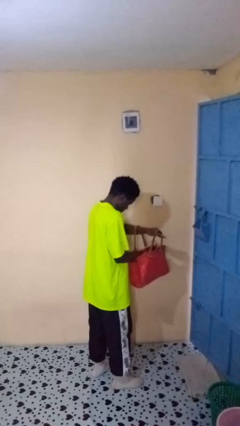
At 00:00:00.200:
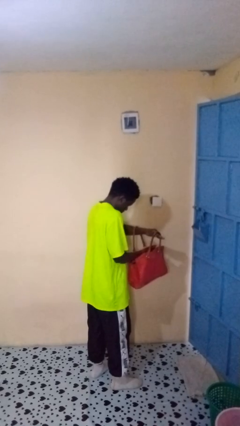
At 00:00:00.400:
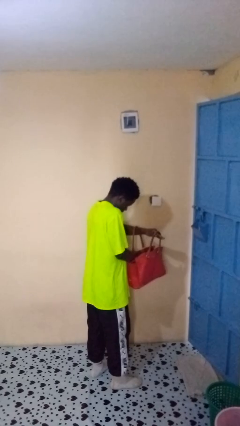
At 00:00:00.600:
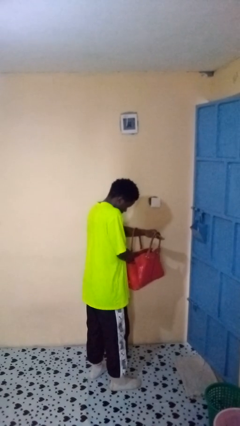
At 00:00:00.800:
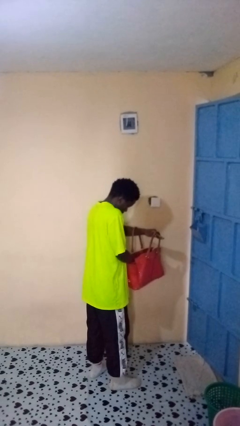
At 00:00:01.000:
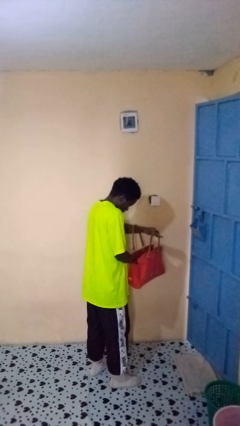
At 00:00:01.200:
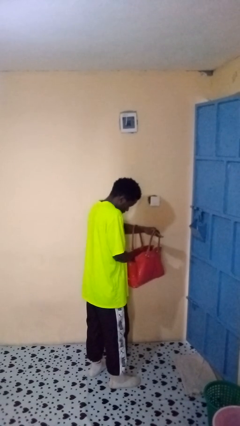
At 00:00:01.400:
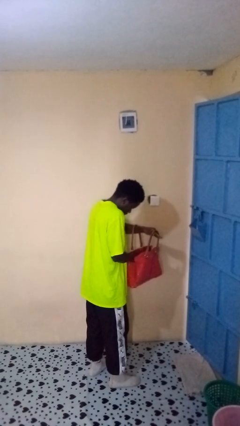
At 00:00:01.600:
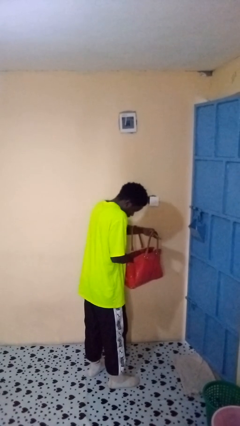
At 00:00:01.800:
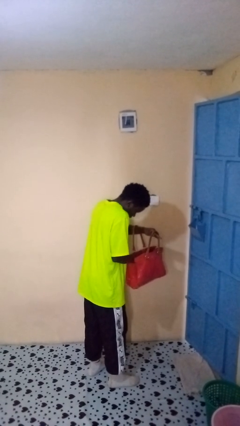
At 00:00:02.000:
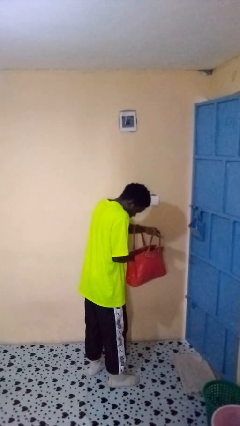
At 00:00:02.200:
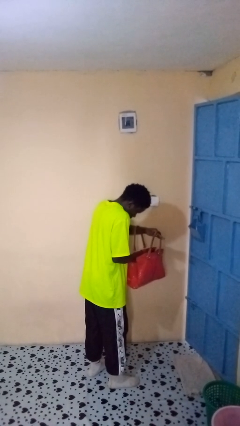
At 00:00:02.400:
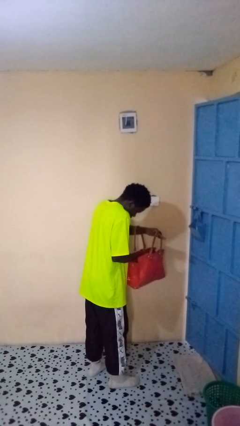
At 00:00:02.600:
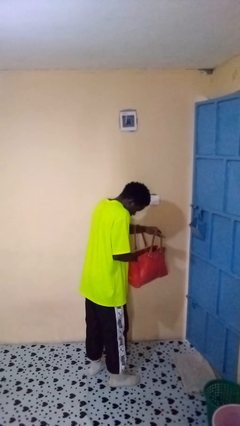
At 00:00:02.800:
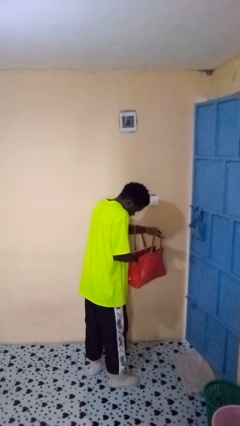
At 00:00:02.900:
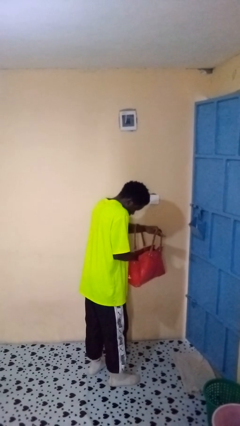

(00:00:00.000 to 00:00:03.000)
person searches in purse

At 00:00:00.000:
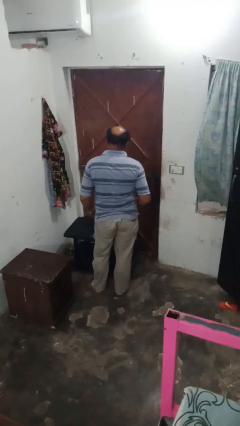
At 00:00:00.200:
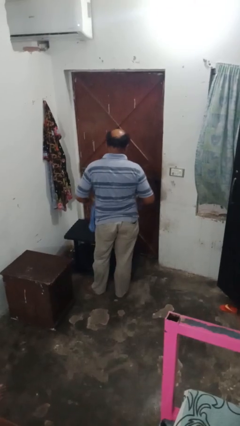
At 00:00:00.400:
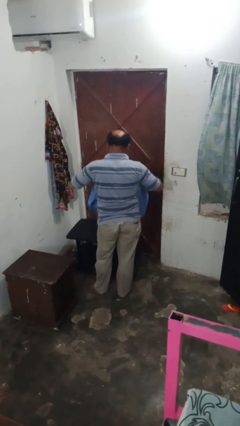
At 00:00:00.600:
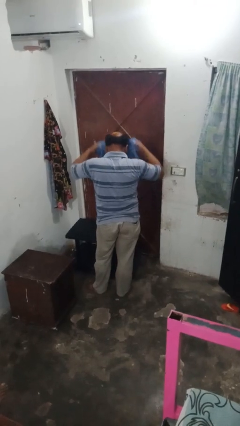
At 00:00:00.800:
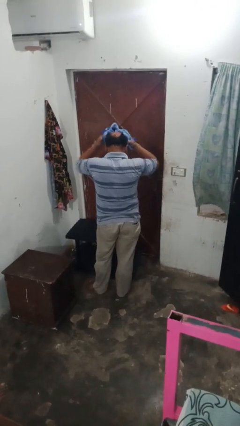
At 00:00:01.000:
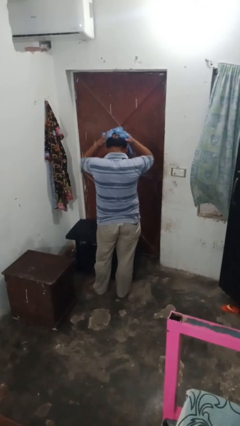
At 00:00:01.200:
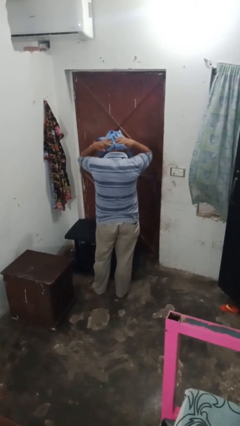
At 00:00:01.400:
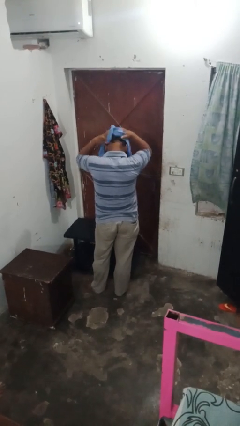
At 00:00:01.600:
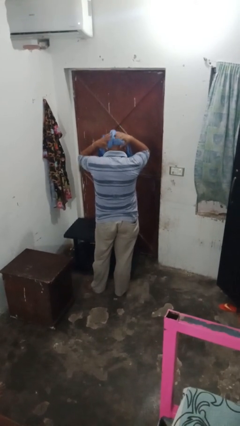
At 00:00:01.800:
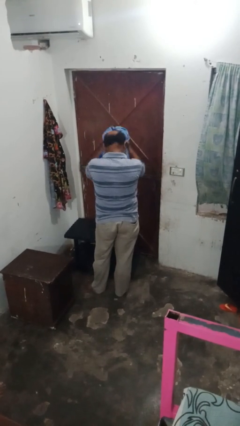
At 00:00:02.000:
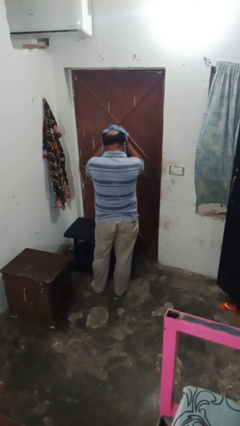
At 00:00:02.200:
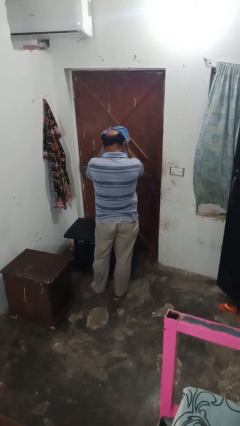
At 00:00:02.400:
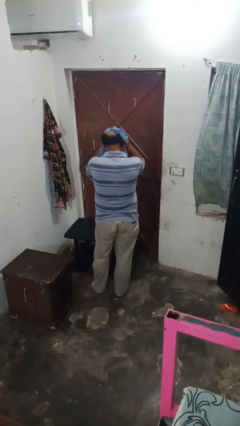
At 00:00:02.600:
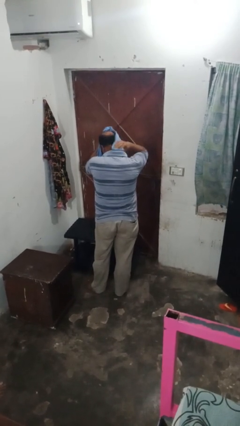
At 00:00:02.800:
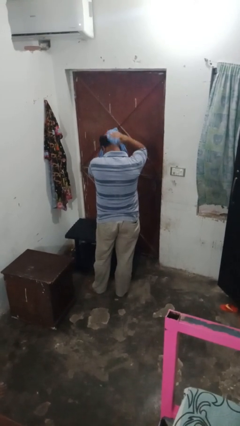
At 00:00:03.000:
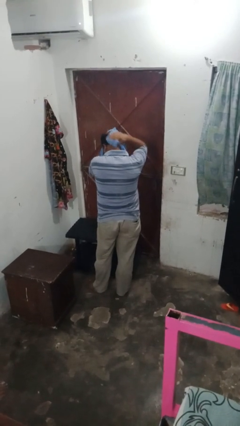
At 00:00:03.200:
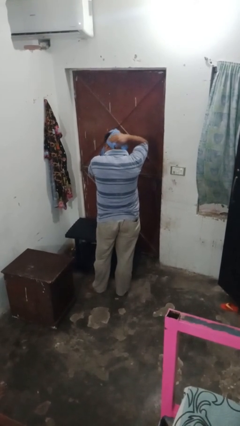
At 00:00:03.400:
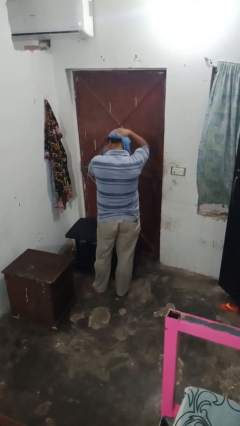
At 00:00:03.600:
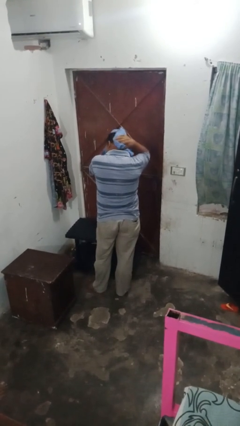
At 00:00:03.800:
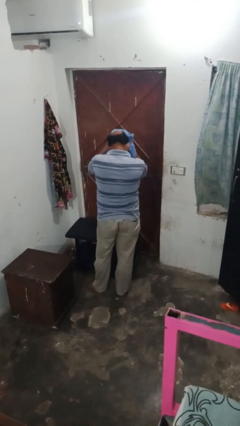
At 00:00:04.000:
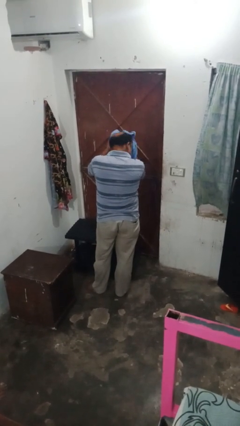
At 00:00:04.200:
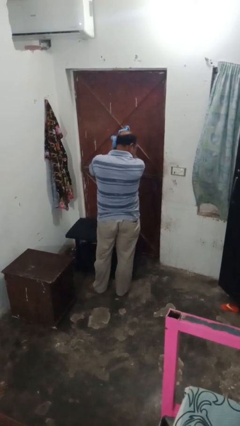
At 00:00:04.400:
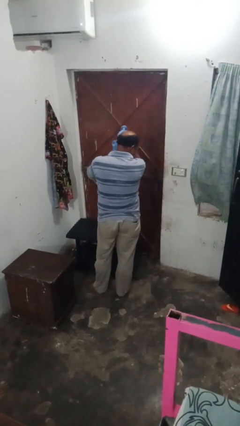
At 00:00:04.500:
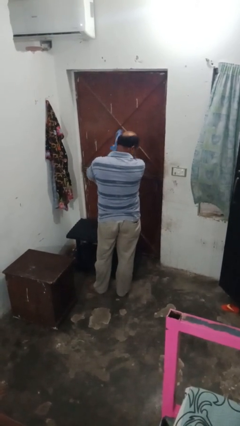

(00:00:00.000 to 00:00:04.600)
person dries hair with towel

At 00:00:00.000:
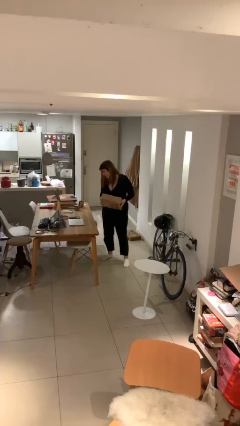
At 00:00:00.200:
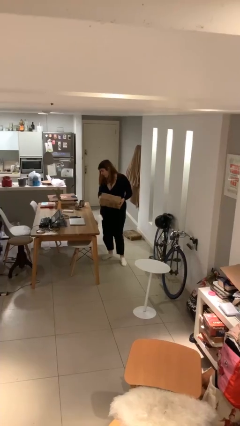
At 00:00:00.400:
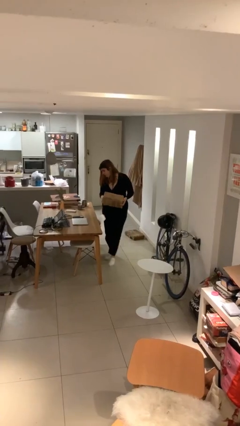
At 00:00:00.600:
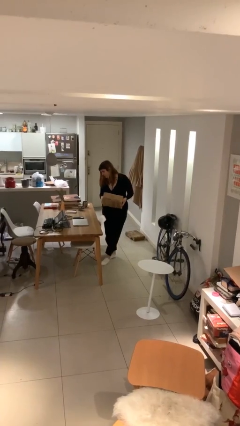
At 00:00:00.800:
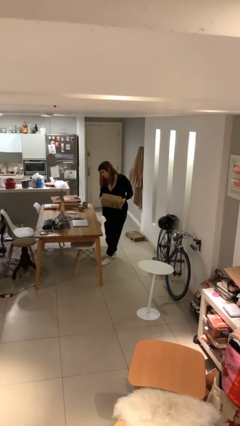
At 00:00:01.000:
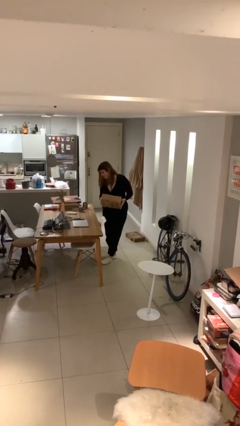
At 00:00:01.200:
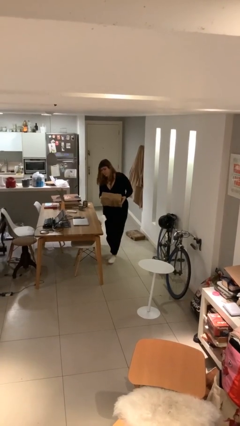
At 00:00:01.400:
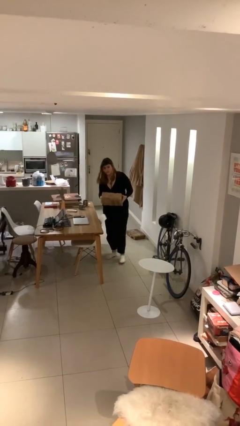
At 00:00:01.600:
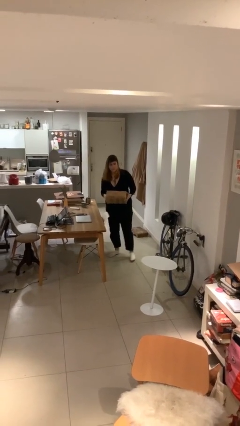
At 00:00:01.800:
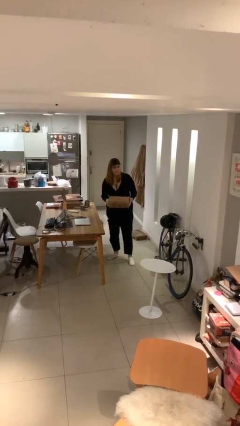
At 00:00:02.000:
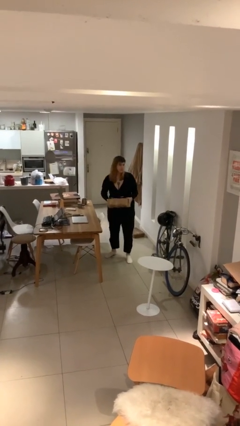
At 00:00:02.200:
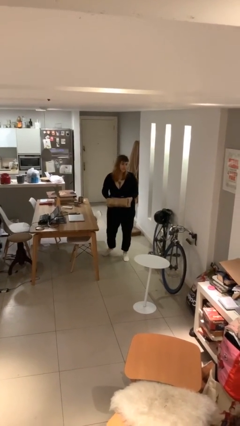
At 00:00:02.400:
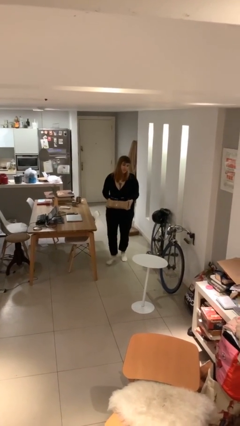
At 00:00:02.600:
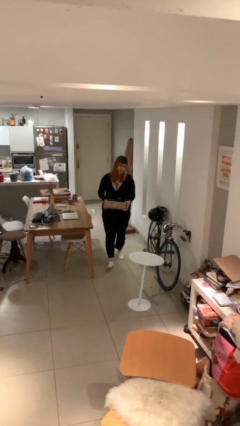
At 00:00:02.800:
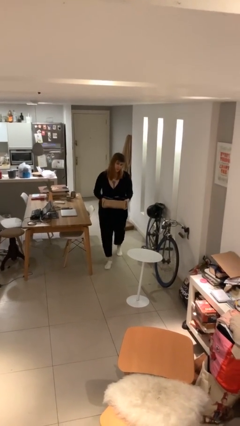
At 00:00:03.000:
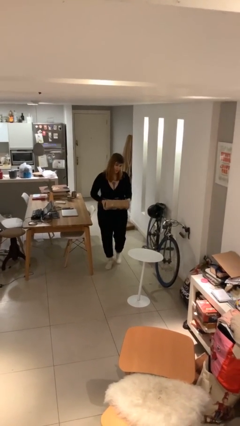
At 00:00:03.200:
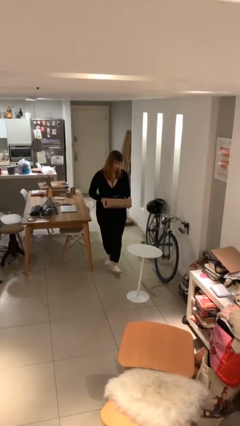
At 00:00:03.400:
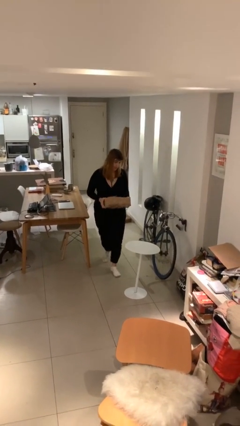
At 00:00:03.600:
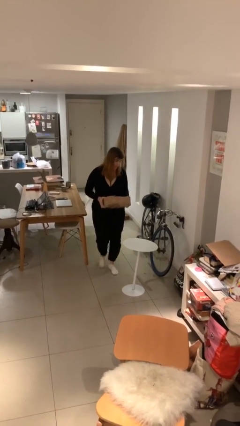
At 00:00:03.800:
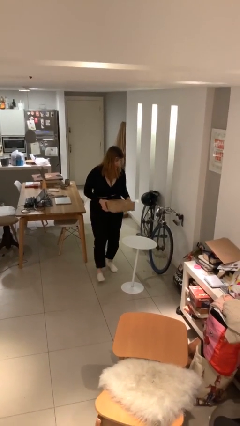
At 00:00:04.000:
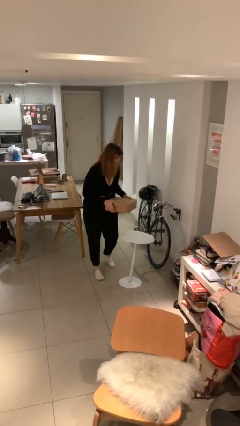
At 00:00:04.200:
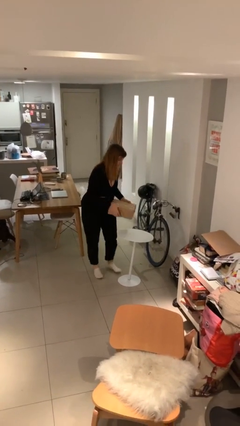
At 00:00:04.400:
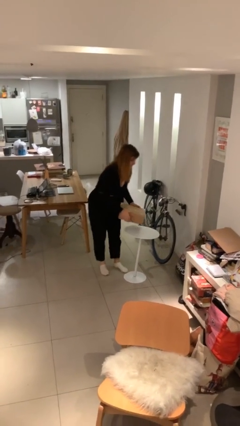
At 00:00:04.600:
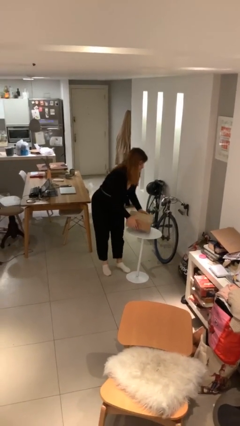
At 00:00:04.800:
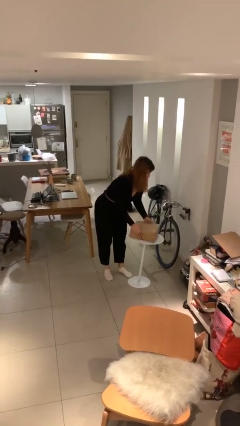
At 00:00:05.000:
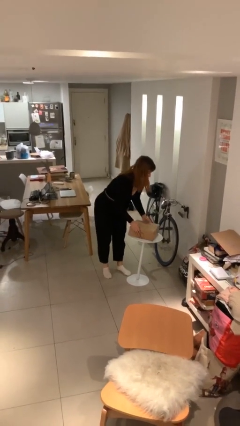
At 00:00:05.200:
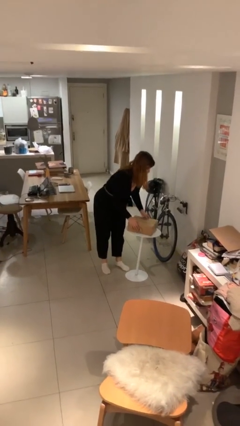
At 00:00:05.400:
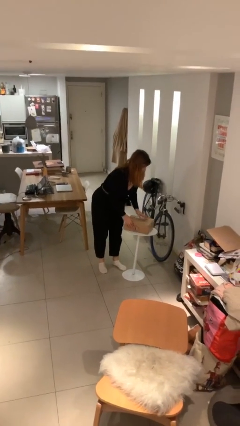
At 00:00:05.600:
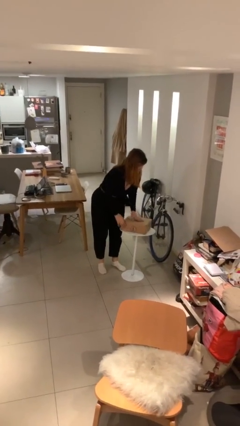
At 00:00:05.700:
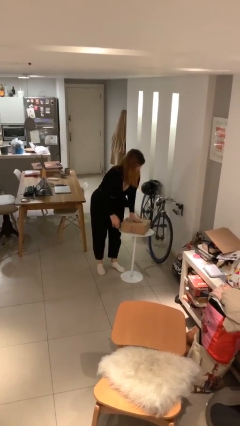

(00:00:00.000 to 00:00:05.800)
person puts down object on table

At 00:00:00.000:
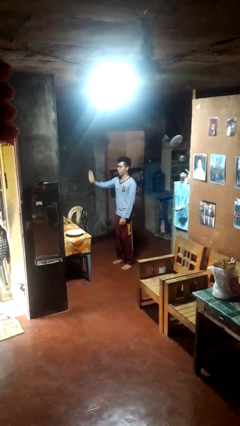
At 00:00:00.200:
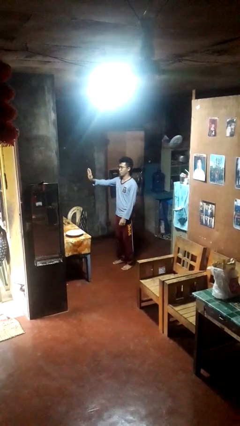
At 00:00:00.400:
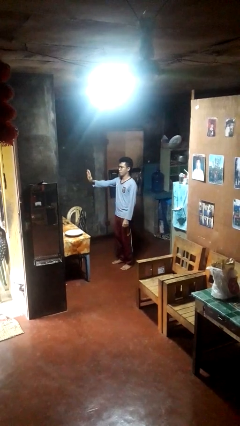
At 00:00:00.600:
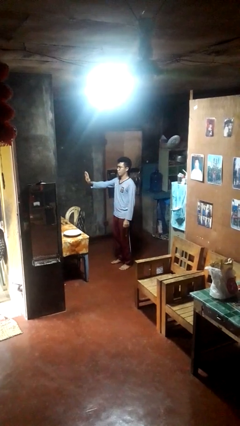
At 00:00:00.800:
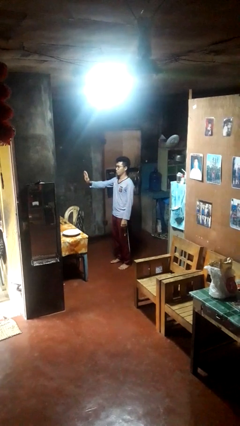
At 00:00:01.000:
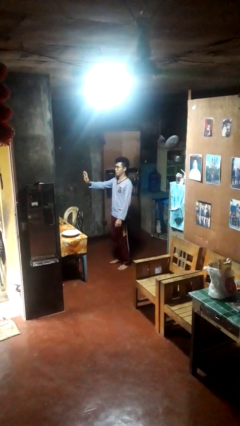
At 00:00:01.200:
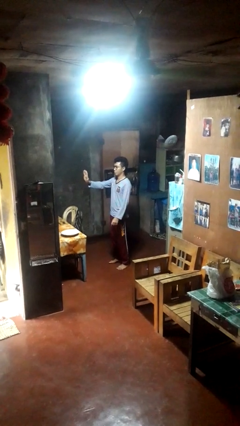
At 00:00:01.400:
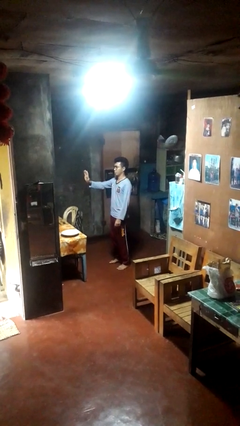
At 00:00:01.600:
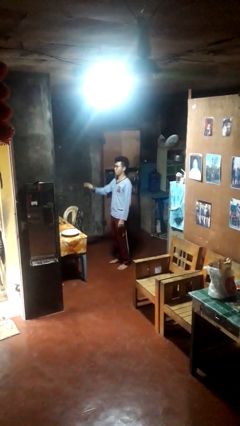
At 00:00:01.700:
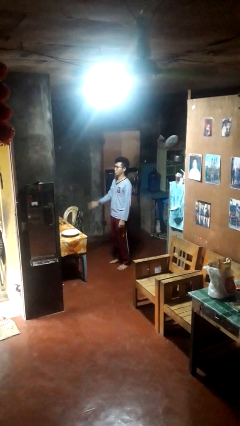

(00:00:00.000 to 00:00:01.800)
person gestures stop

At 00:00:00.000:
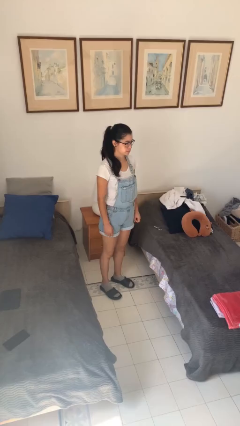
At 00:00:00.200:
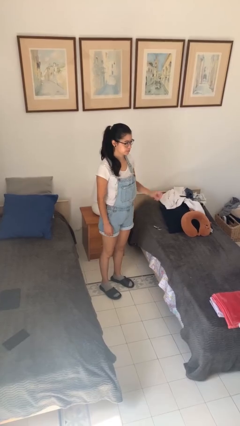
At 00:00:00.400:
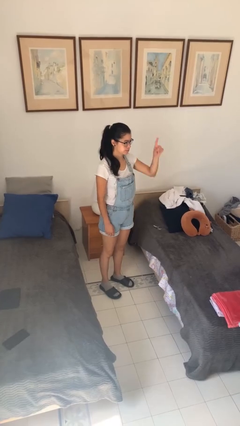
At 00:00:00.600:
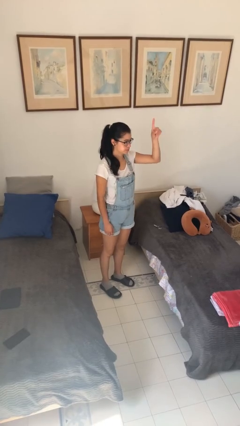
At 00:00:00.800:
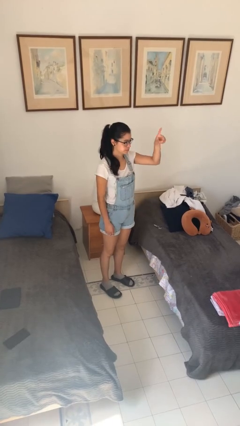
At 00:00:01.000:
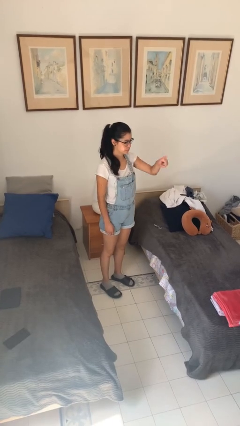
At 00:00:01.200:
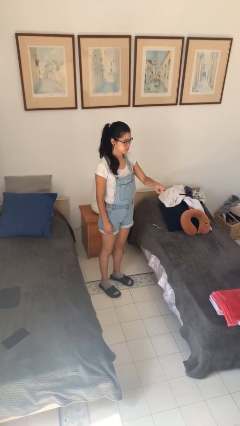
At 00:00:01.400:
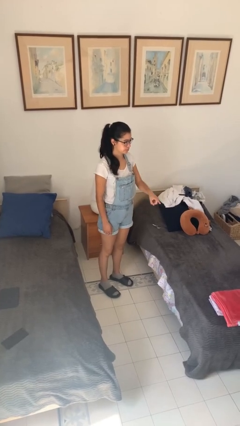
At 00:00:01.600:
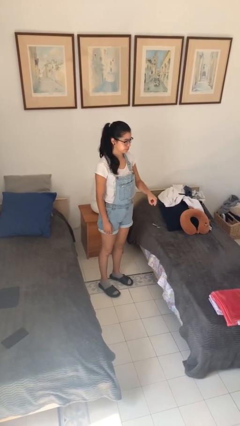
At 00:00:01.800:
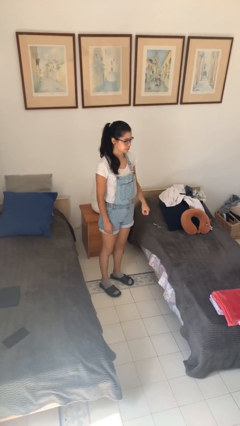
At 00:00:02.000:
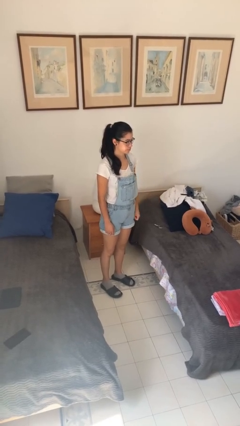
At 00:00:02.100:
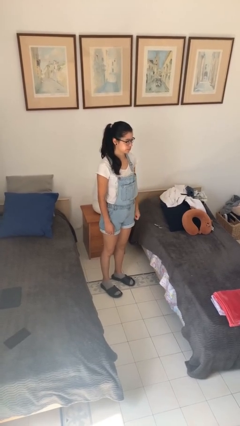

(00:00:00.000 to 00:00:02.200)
person gestures number one
